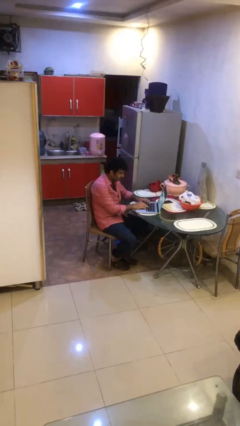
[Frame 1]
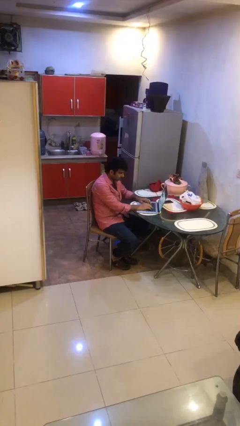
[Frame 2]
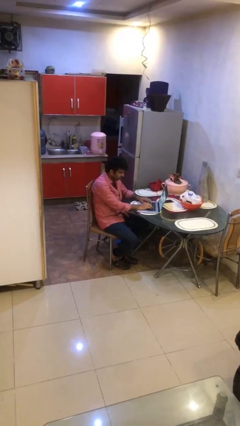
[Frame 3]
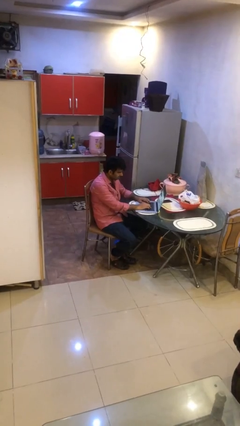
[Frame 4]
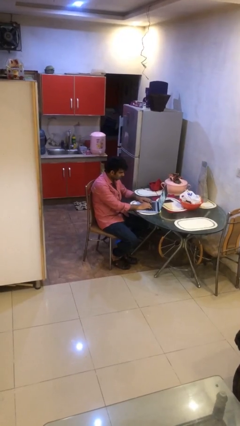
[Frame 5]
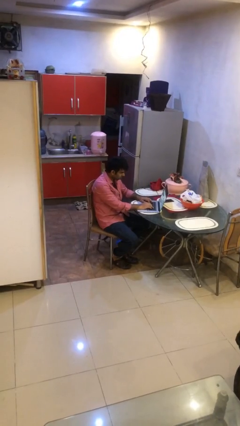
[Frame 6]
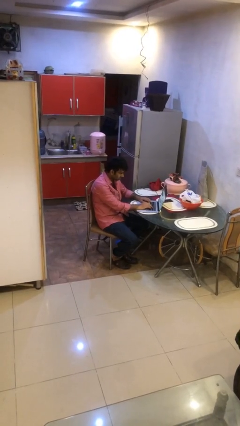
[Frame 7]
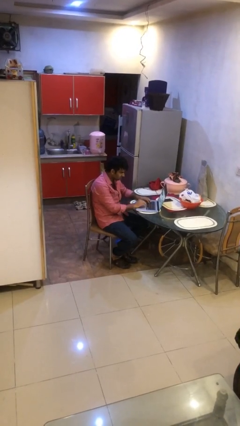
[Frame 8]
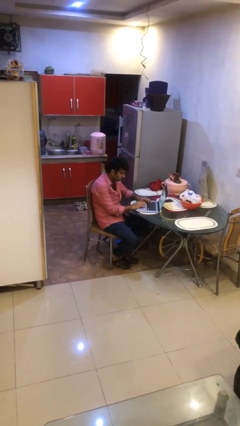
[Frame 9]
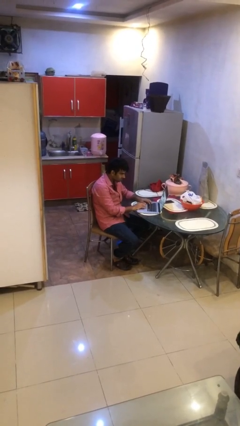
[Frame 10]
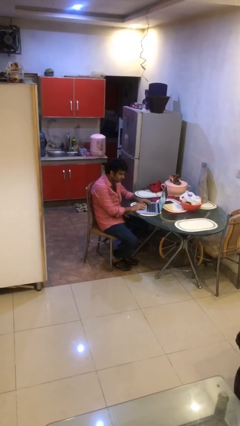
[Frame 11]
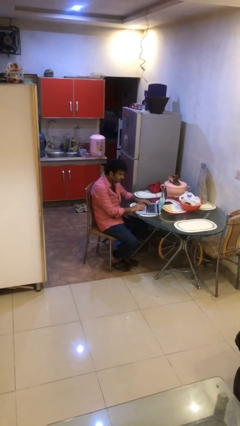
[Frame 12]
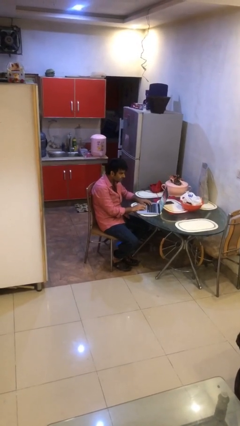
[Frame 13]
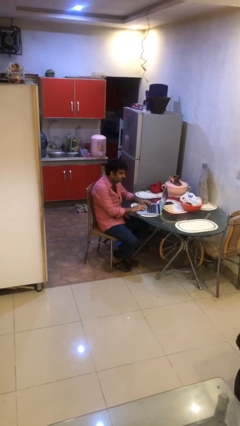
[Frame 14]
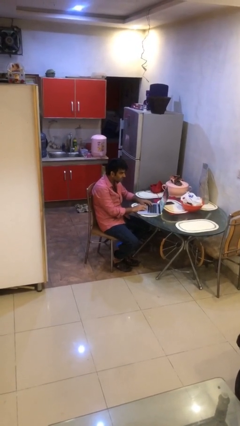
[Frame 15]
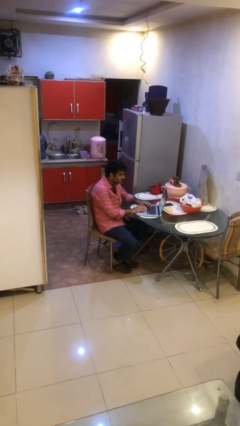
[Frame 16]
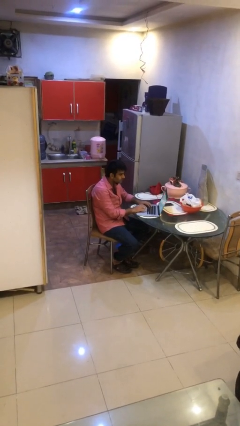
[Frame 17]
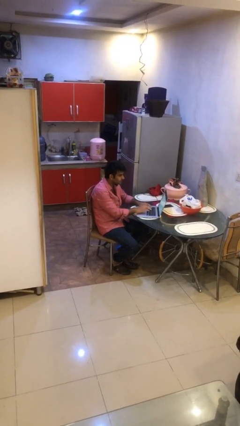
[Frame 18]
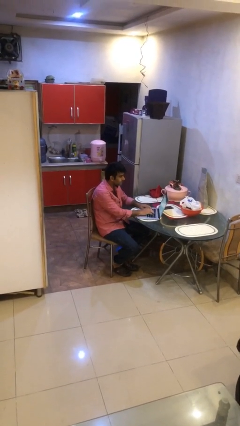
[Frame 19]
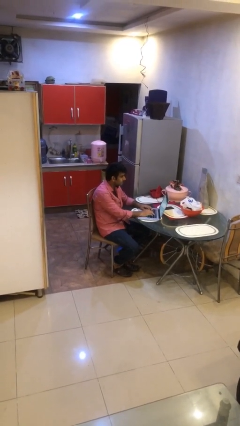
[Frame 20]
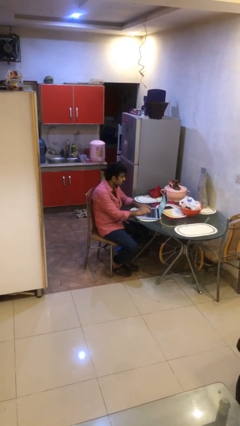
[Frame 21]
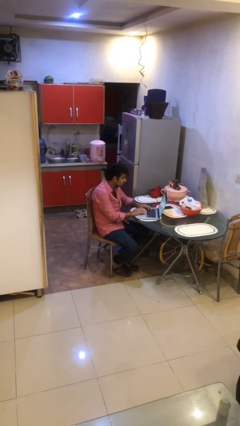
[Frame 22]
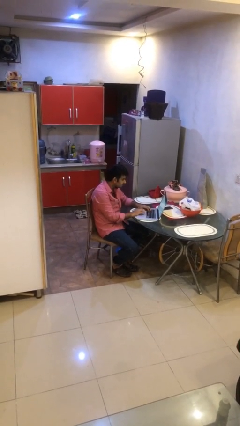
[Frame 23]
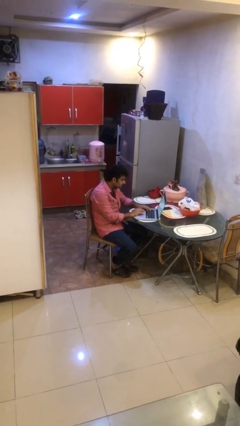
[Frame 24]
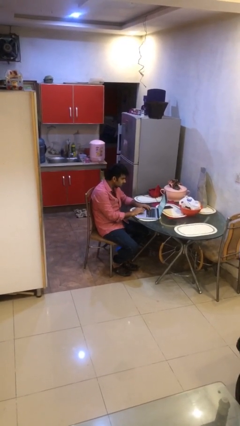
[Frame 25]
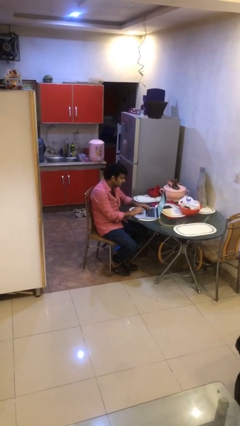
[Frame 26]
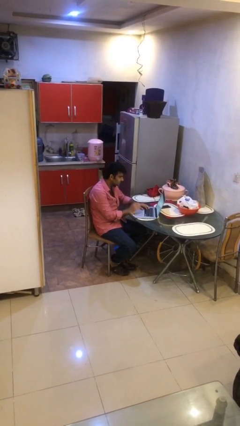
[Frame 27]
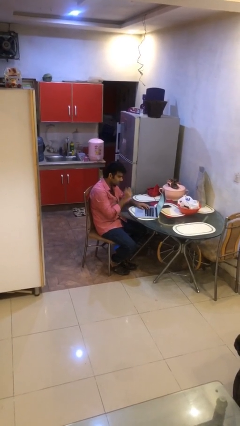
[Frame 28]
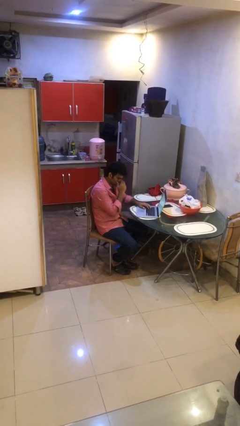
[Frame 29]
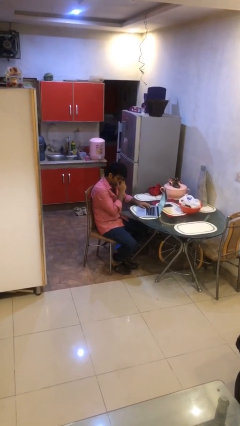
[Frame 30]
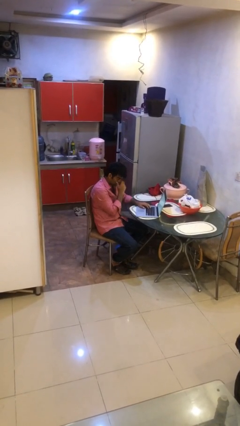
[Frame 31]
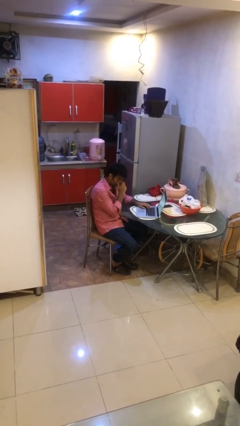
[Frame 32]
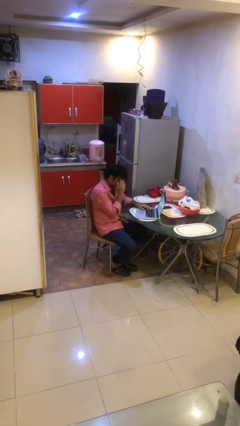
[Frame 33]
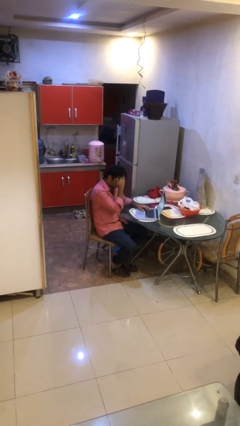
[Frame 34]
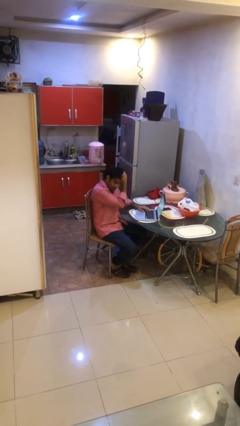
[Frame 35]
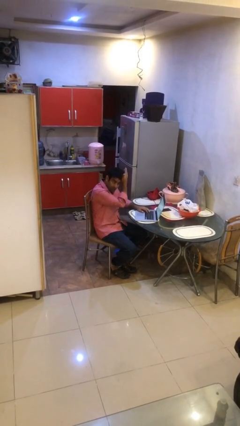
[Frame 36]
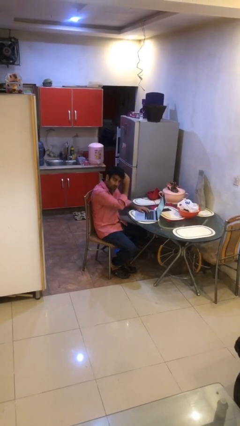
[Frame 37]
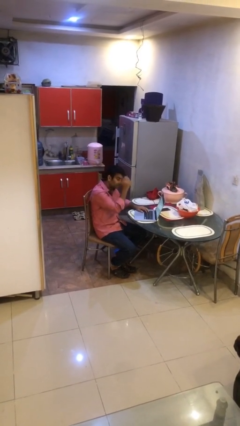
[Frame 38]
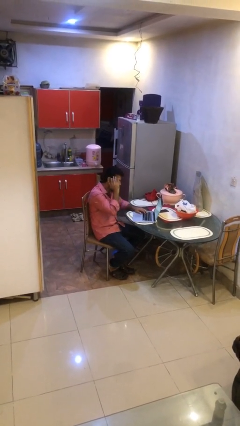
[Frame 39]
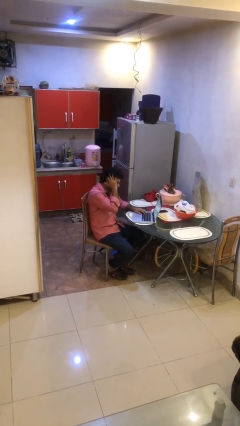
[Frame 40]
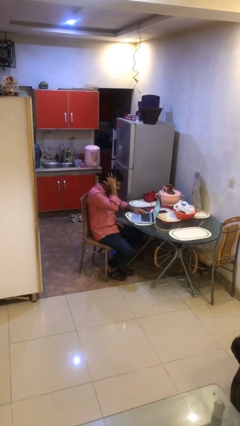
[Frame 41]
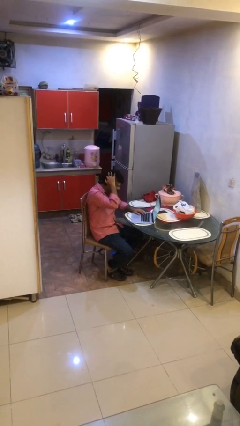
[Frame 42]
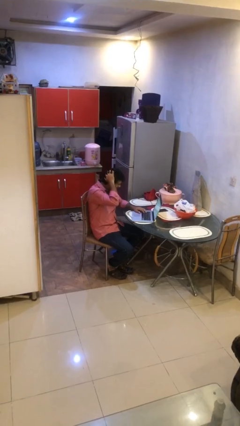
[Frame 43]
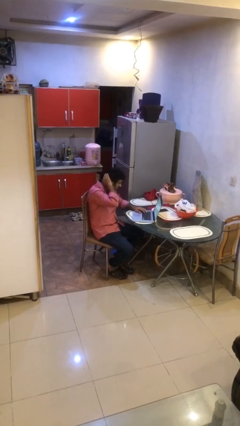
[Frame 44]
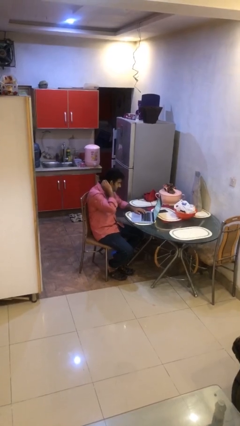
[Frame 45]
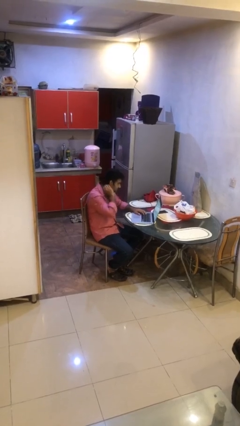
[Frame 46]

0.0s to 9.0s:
person interacts with laptop

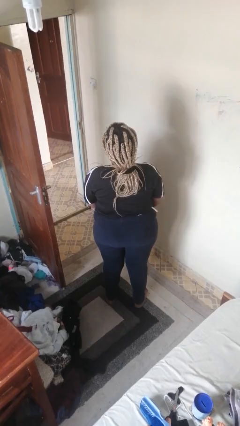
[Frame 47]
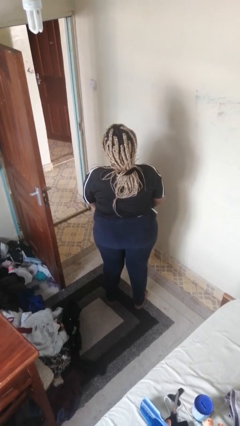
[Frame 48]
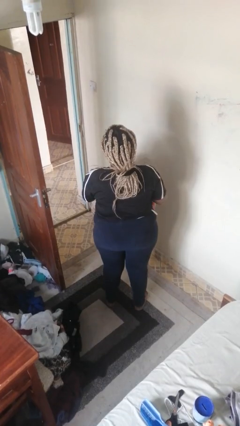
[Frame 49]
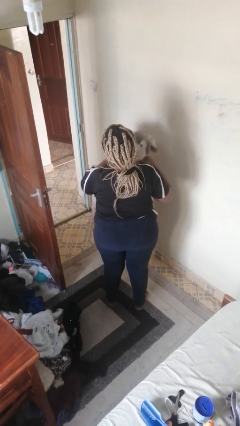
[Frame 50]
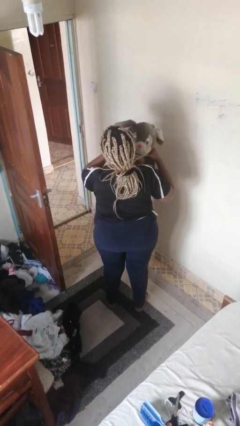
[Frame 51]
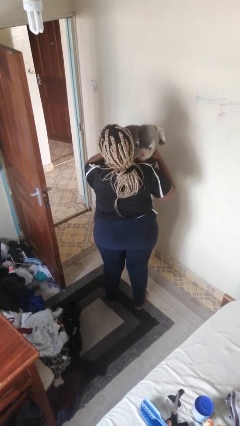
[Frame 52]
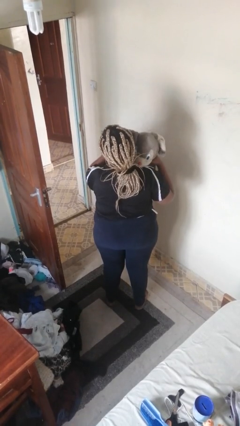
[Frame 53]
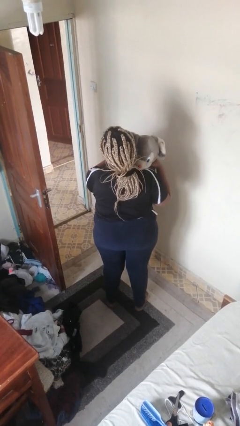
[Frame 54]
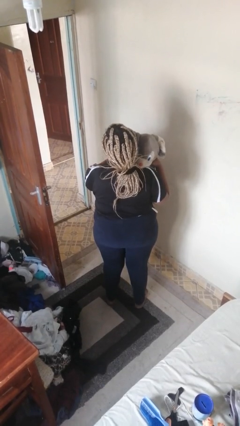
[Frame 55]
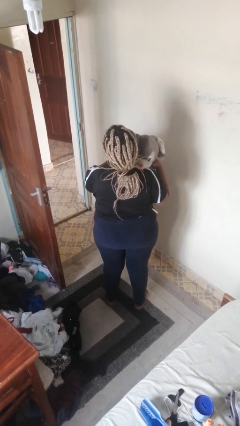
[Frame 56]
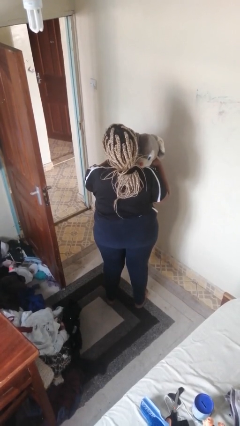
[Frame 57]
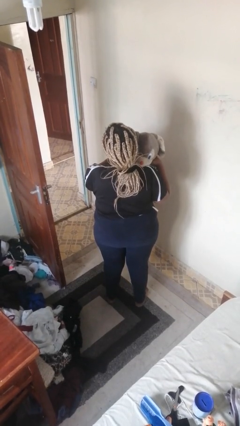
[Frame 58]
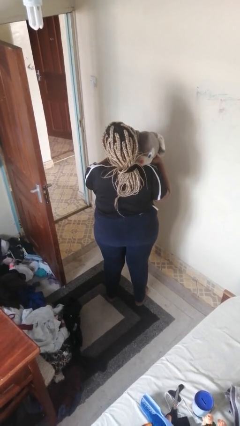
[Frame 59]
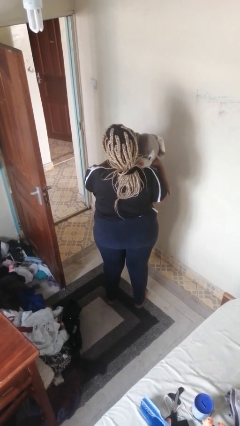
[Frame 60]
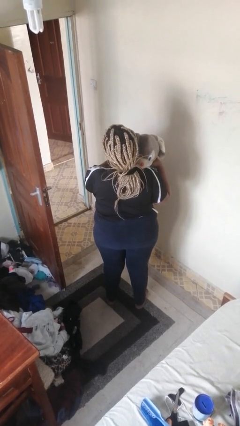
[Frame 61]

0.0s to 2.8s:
person hugs stuffed animal

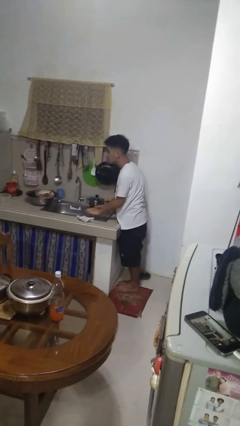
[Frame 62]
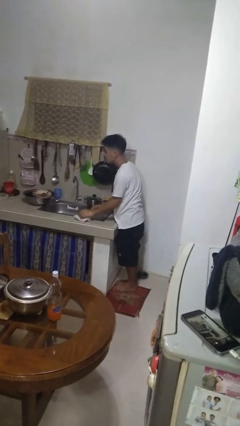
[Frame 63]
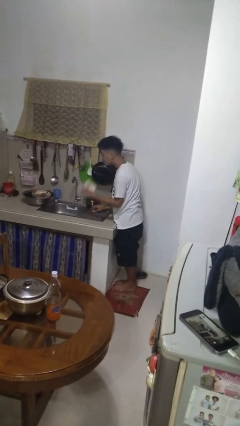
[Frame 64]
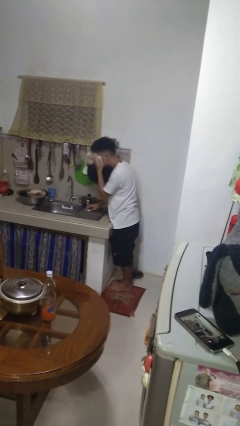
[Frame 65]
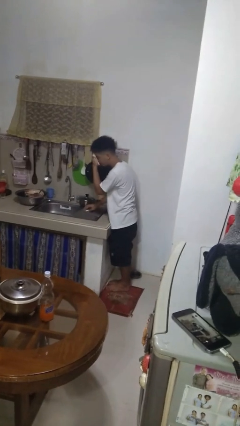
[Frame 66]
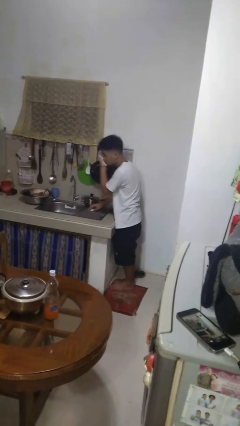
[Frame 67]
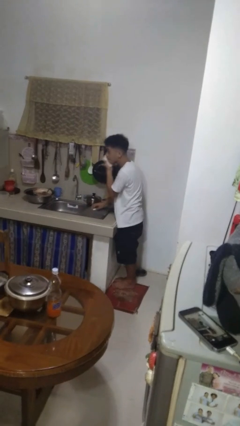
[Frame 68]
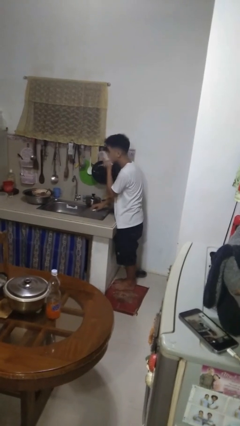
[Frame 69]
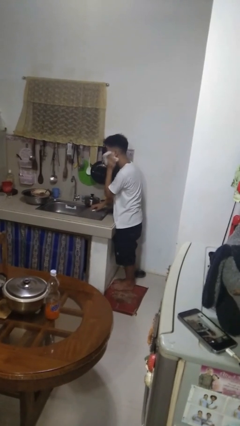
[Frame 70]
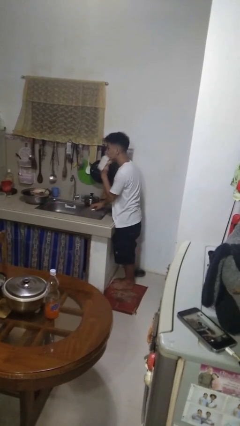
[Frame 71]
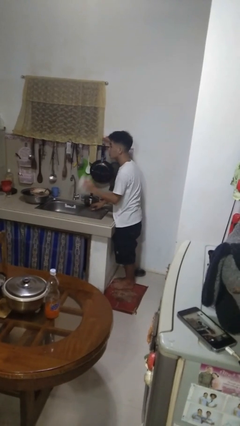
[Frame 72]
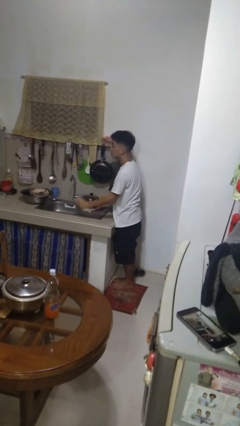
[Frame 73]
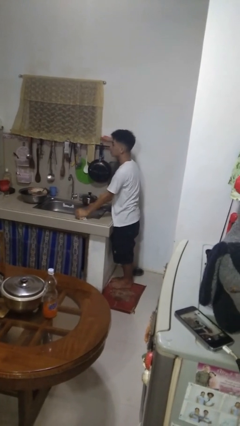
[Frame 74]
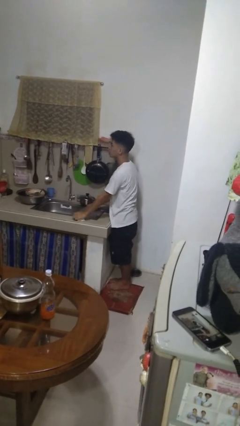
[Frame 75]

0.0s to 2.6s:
person dries face with towel

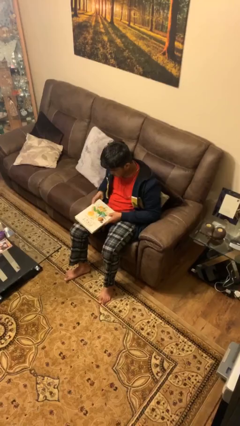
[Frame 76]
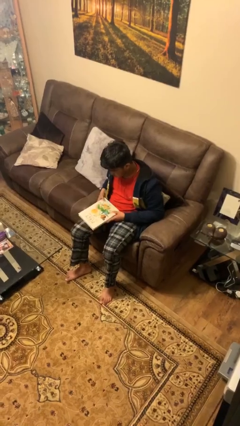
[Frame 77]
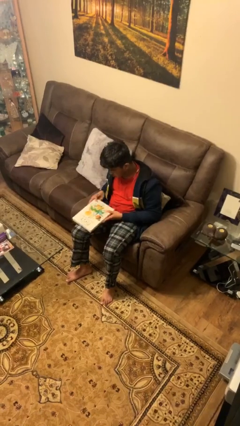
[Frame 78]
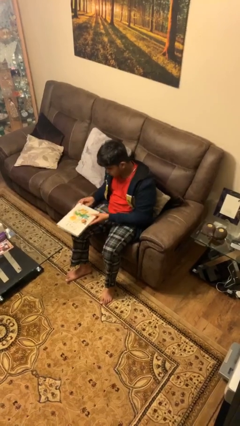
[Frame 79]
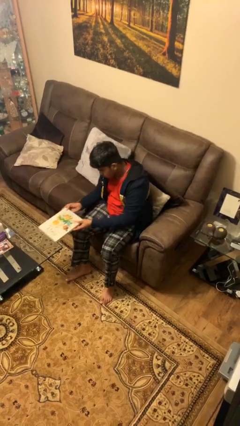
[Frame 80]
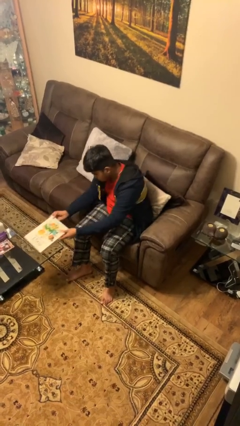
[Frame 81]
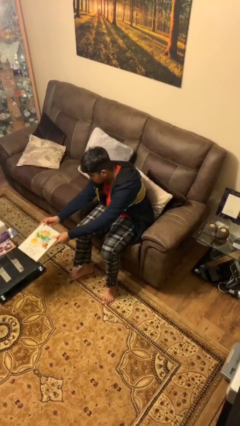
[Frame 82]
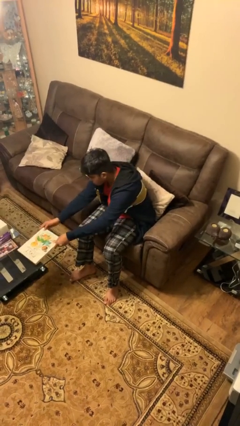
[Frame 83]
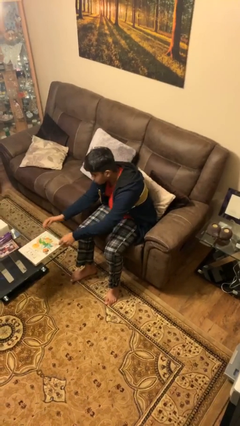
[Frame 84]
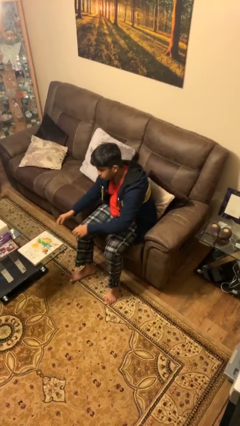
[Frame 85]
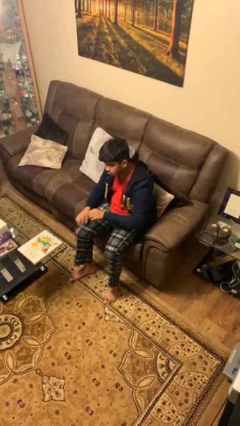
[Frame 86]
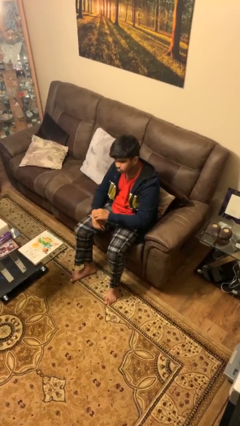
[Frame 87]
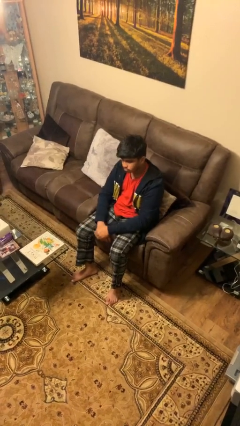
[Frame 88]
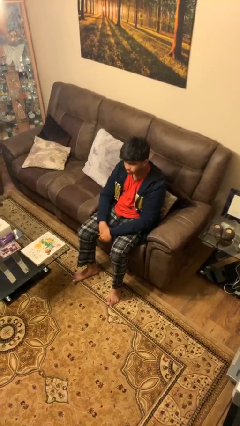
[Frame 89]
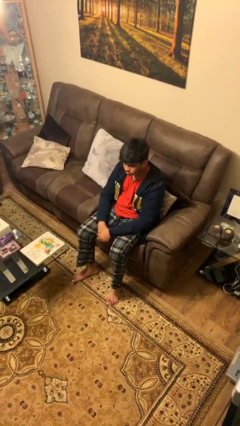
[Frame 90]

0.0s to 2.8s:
person puts down object on table

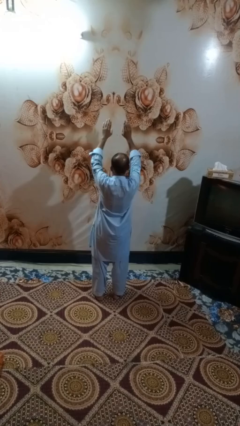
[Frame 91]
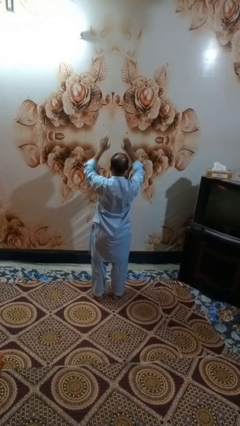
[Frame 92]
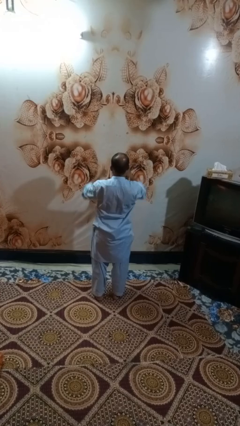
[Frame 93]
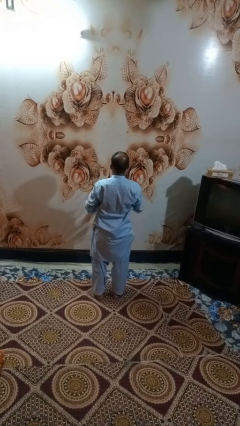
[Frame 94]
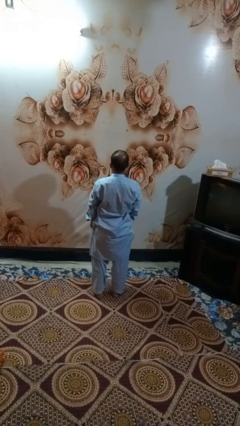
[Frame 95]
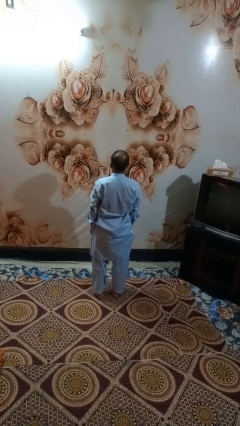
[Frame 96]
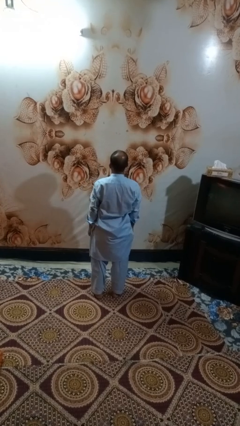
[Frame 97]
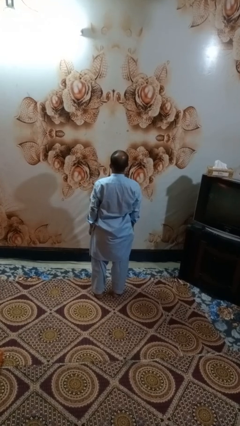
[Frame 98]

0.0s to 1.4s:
person gestures swipe down
